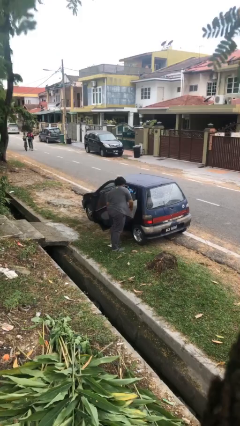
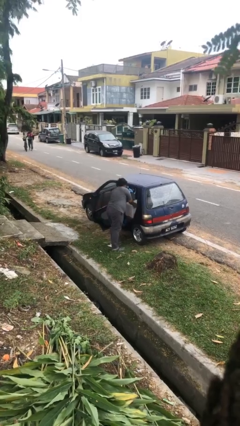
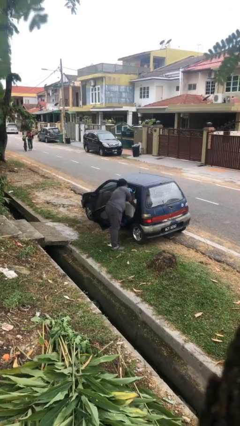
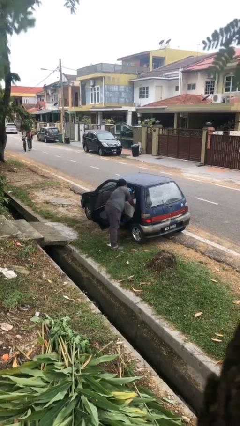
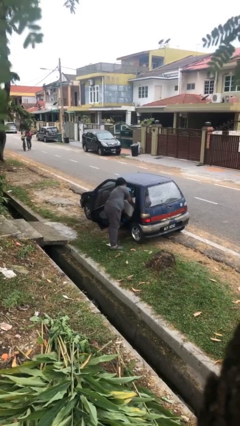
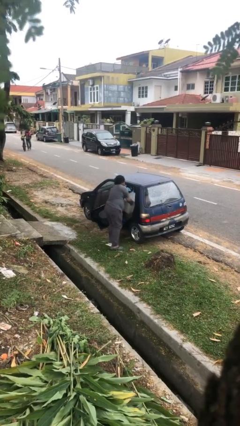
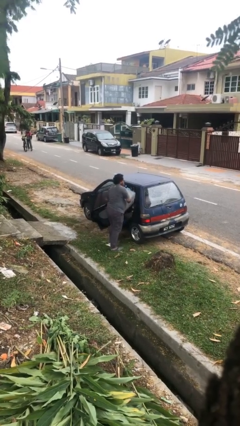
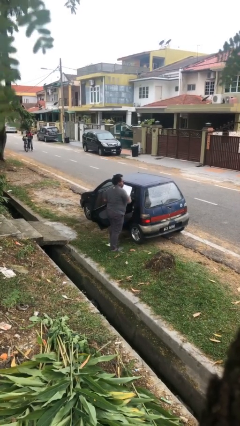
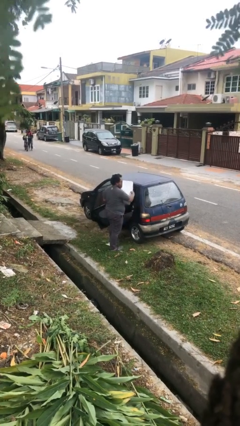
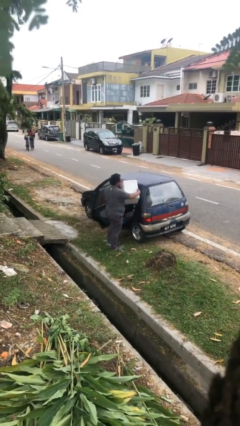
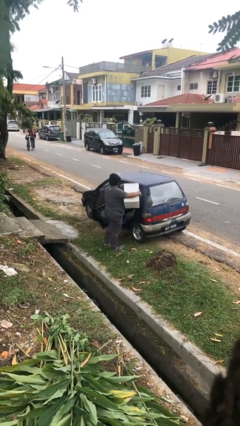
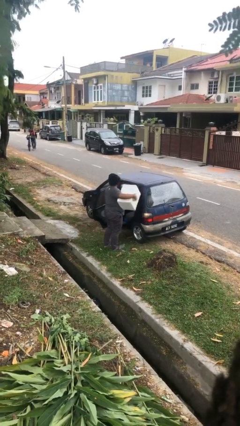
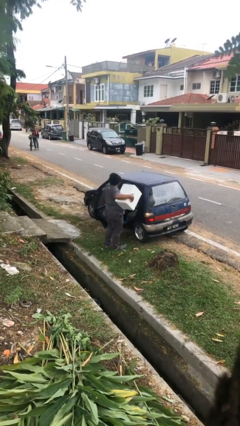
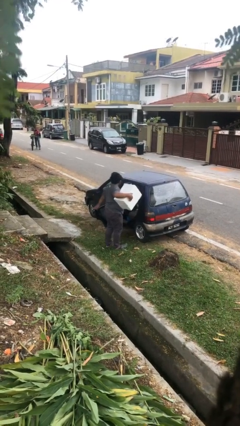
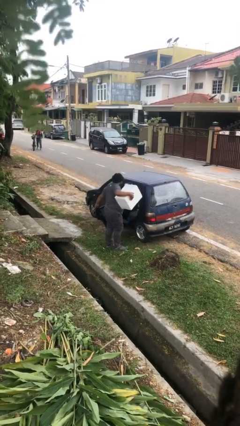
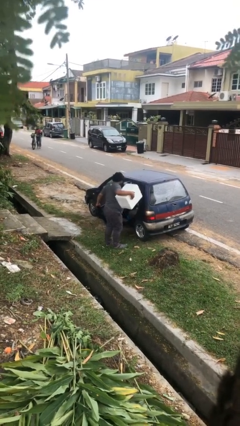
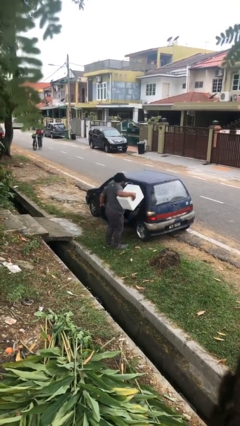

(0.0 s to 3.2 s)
person unloads car

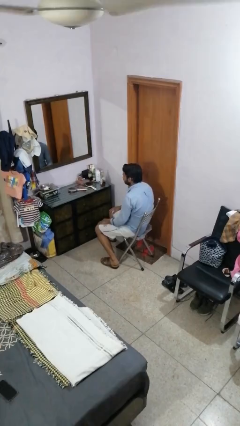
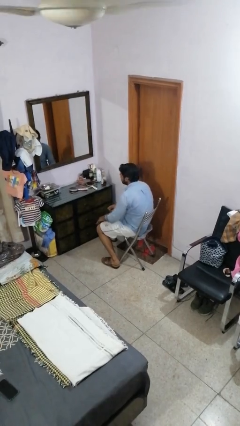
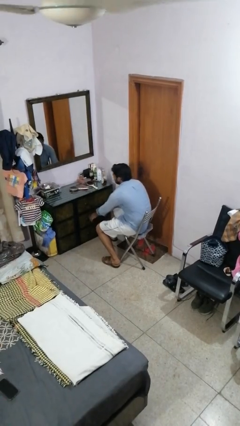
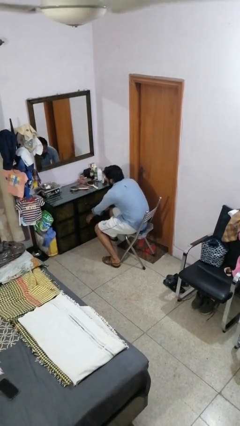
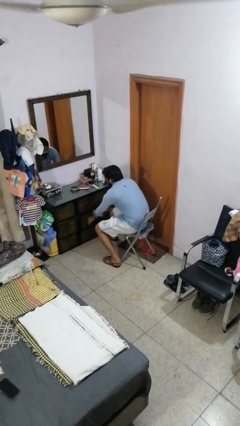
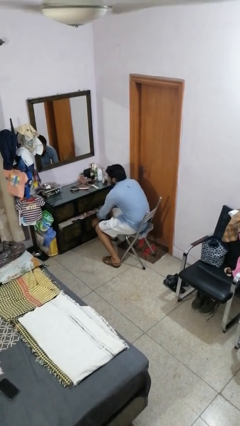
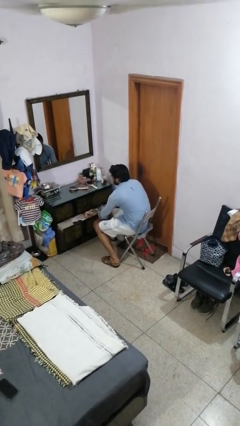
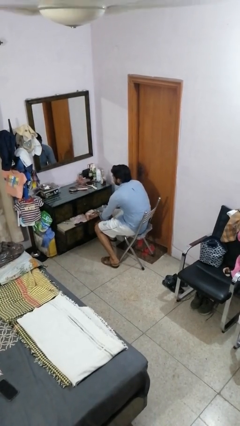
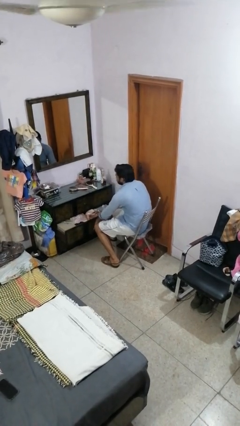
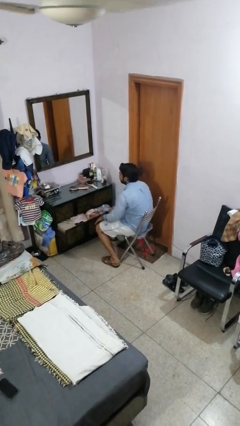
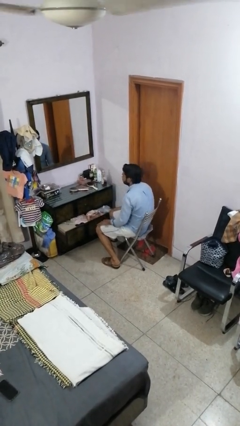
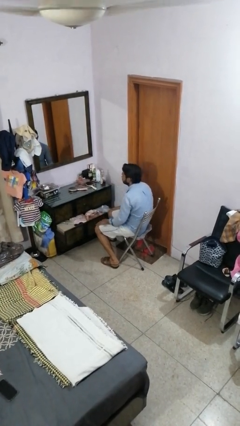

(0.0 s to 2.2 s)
person opens dresser drawer

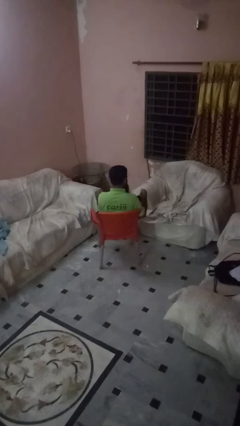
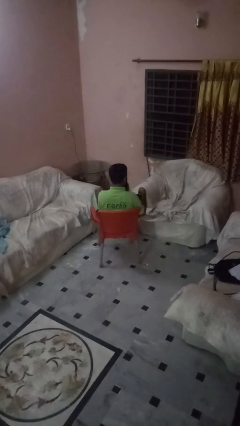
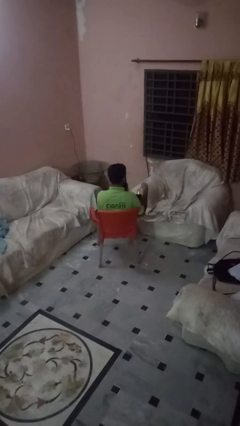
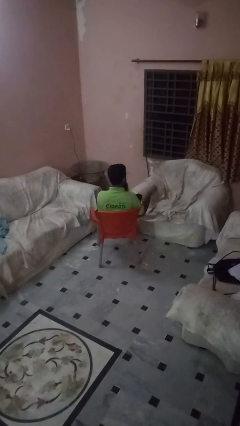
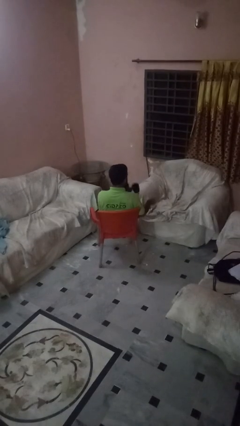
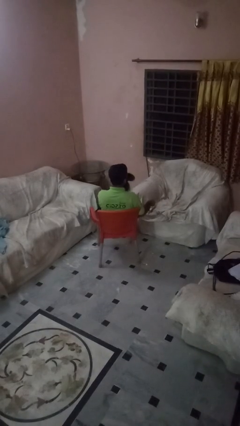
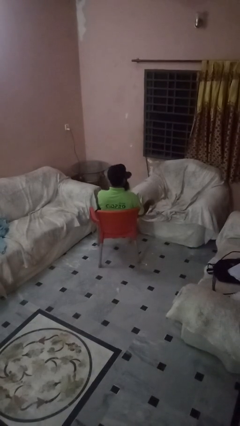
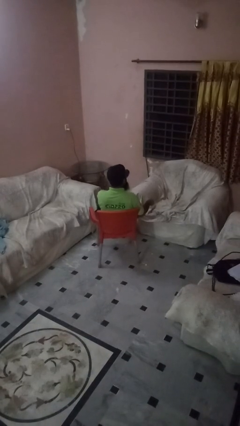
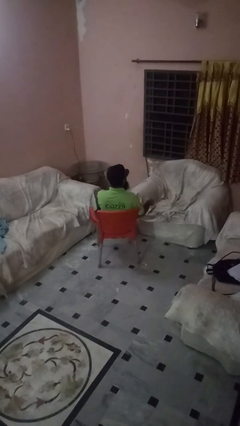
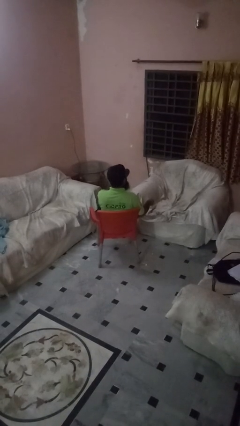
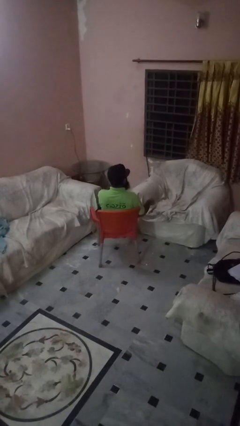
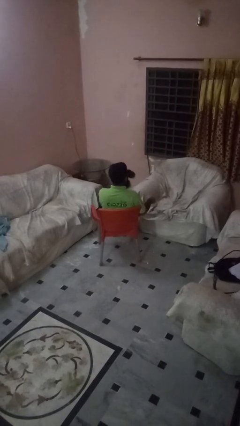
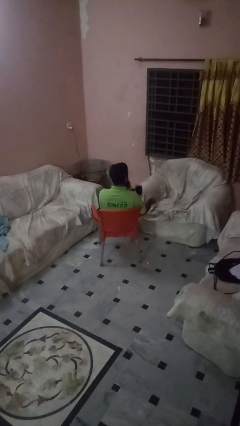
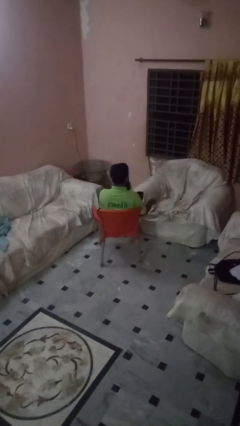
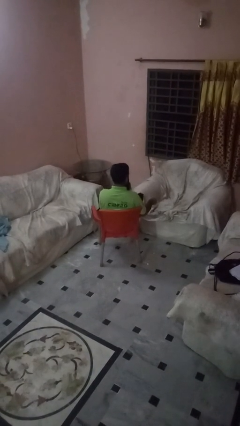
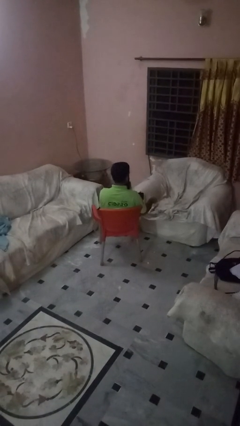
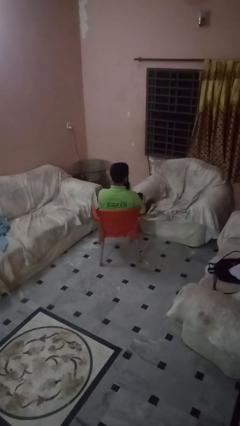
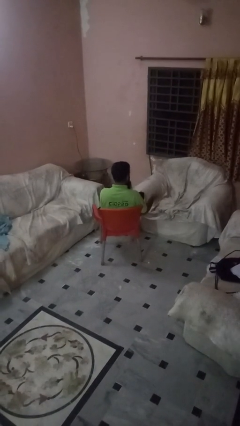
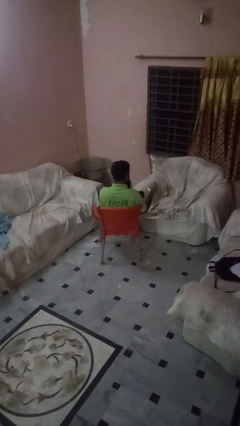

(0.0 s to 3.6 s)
person drinks from mug

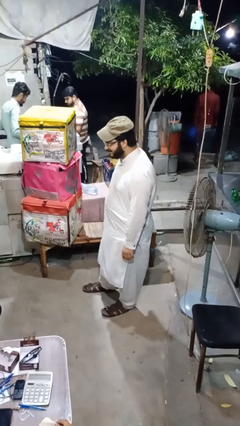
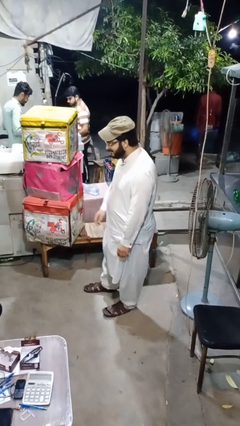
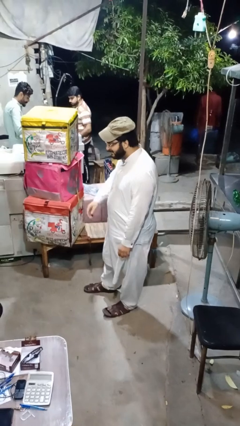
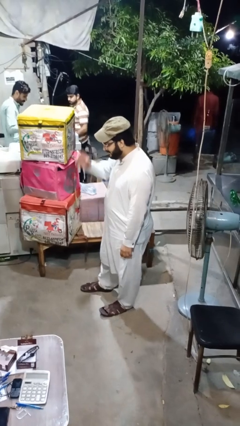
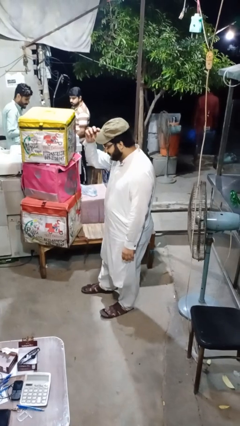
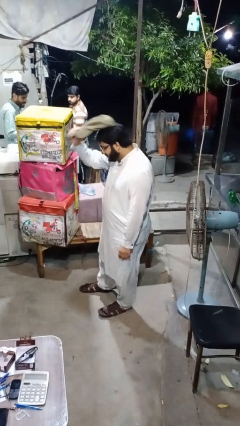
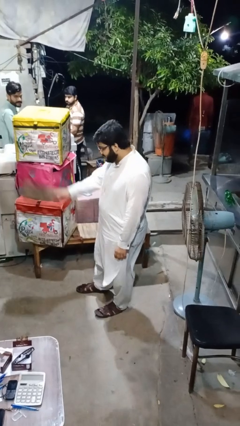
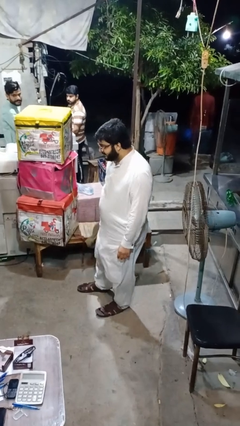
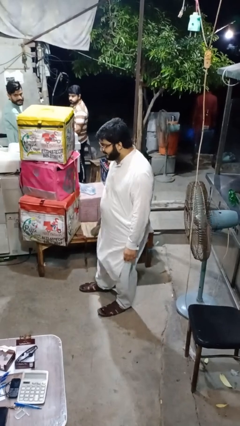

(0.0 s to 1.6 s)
person takes off hat

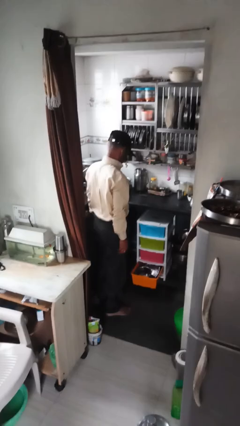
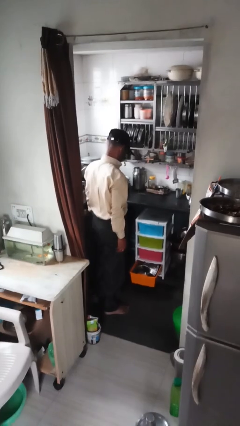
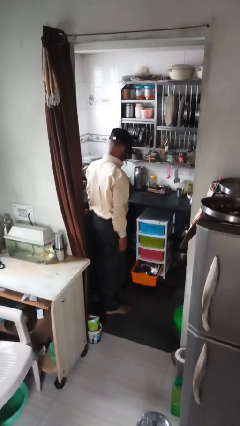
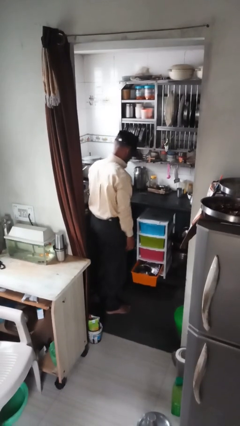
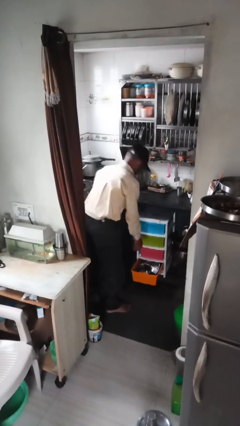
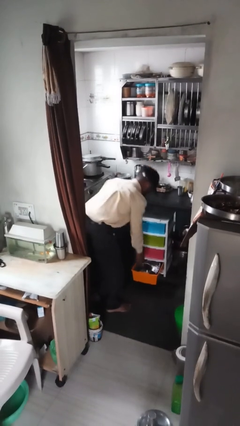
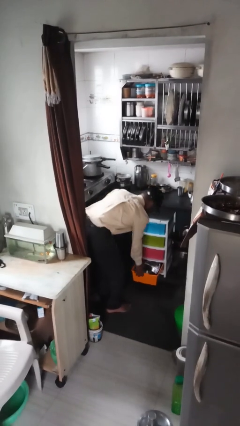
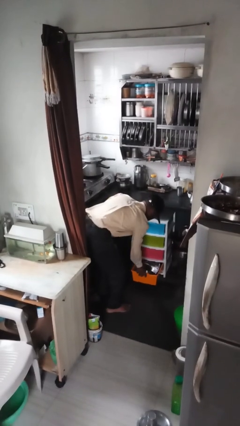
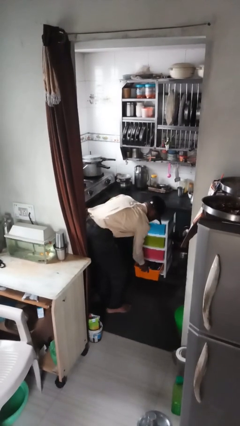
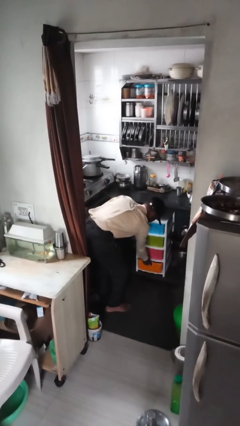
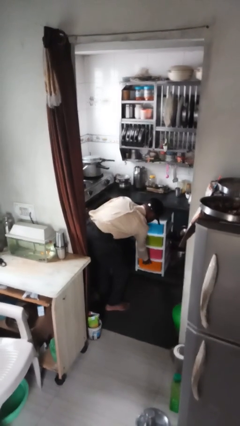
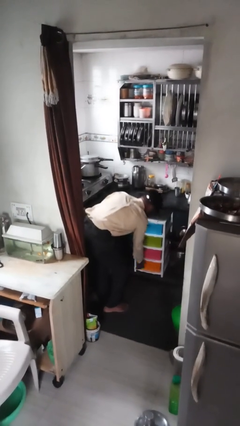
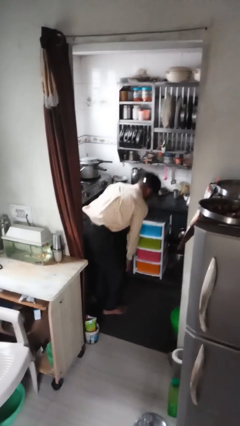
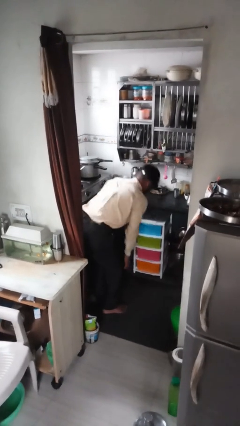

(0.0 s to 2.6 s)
person closes kitchen drawer

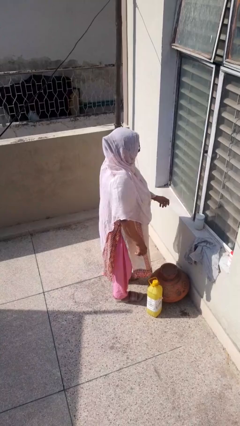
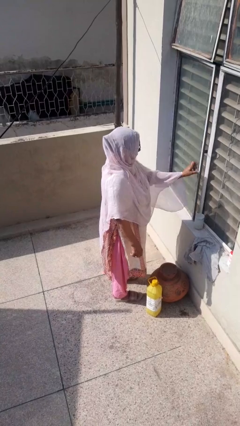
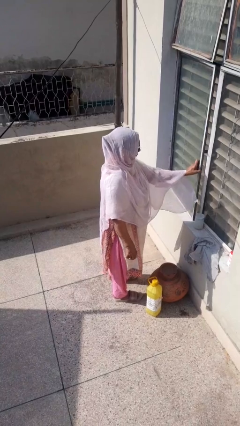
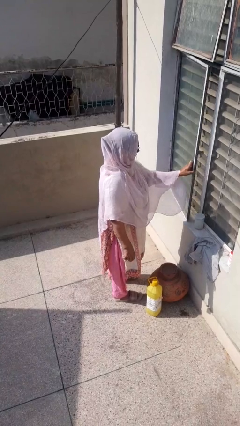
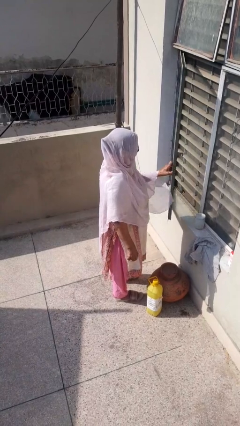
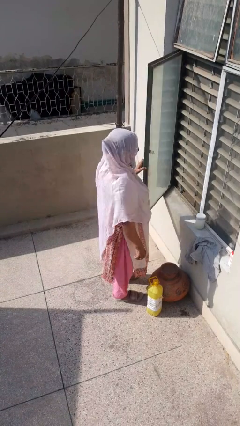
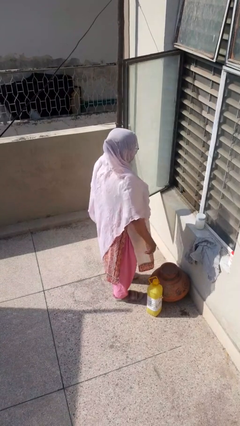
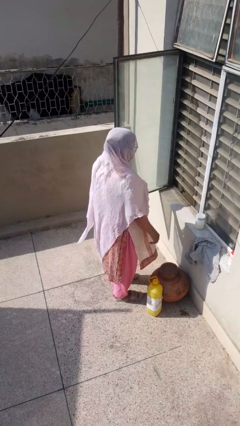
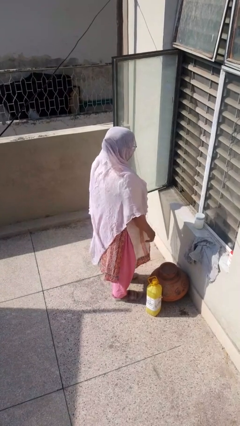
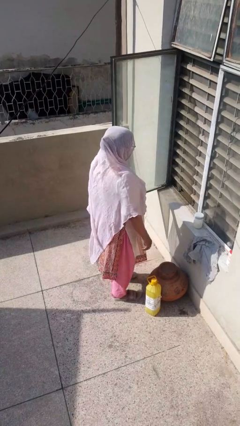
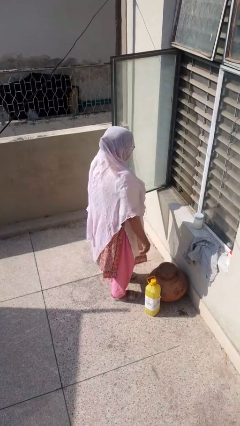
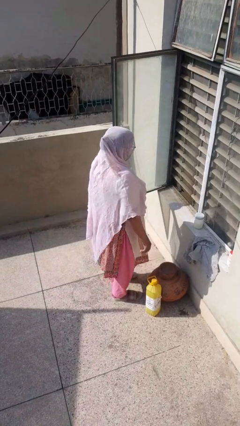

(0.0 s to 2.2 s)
person opens home window

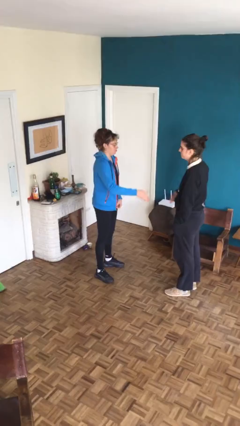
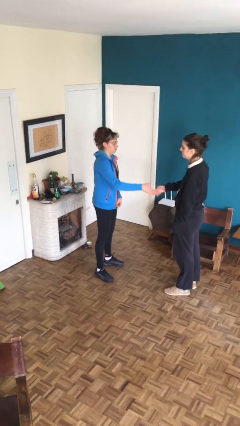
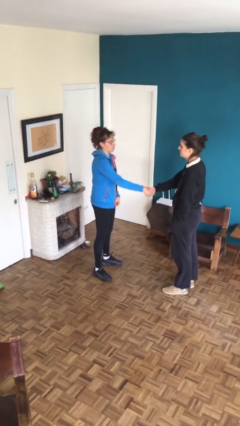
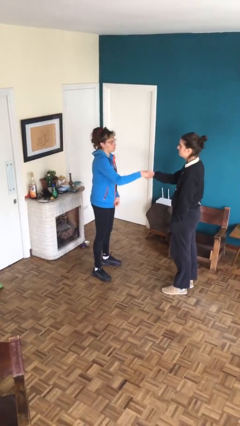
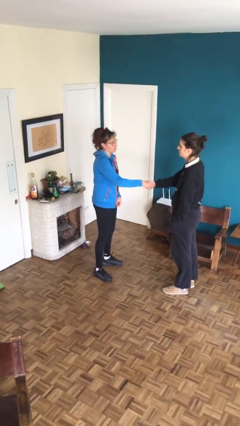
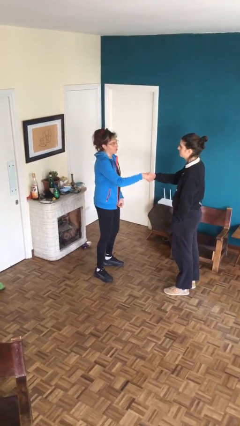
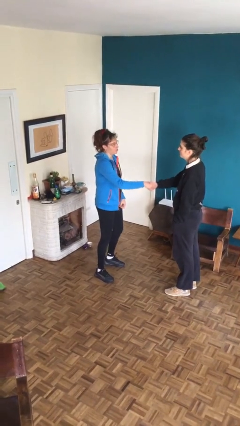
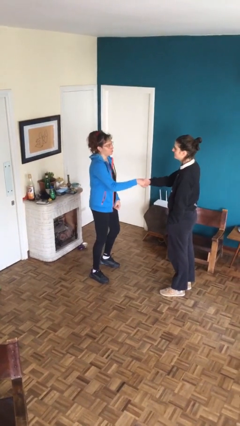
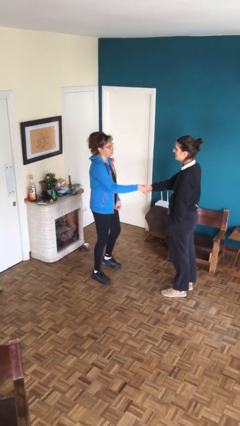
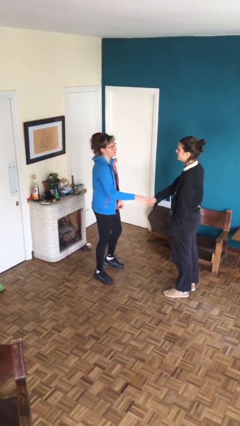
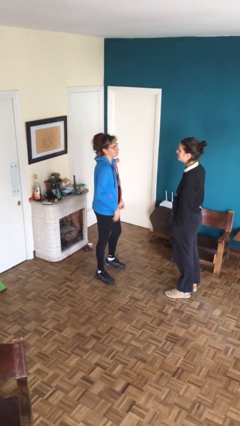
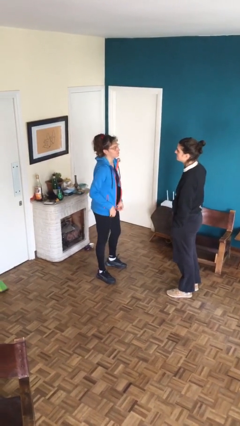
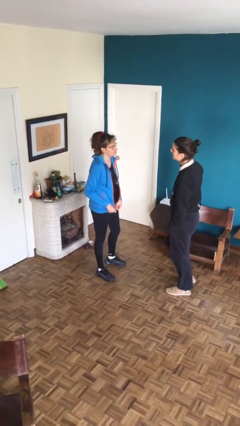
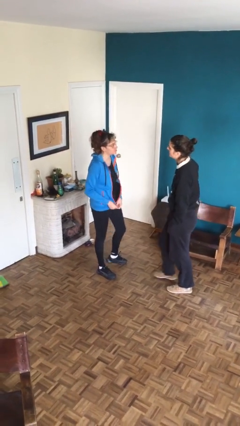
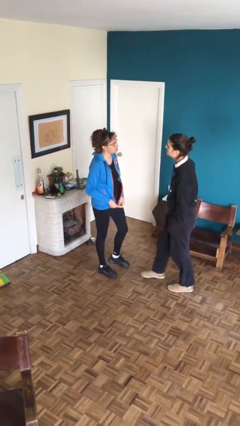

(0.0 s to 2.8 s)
person shakes hand
